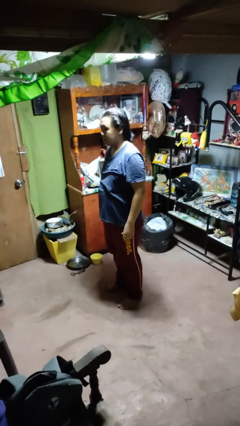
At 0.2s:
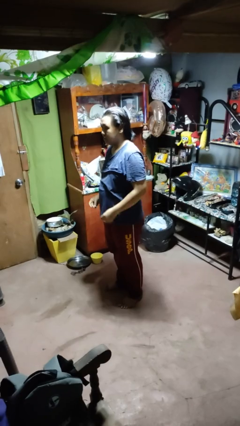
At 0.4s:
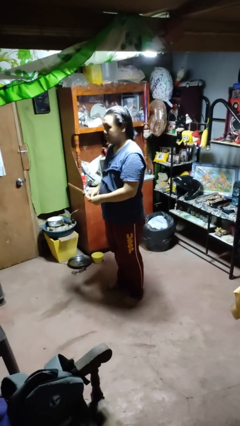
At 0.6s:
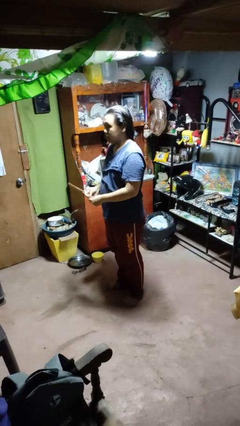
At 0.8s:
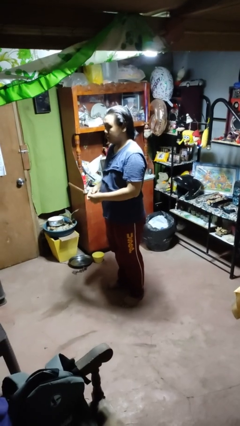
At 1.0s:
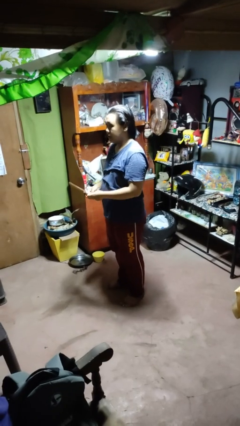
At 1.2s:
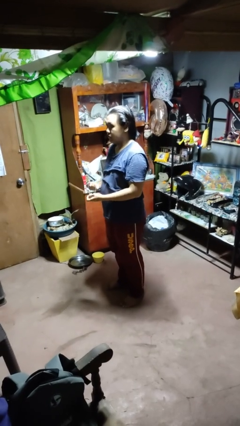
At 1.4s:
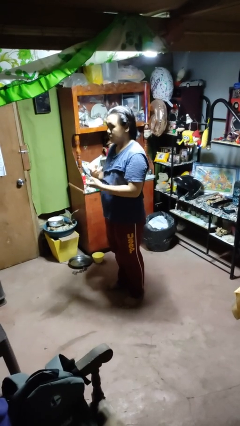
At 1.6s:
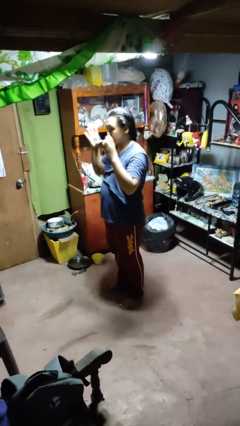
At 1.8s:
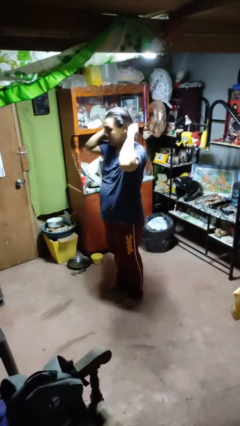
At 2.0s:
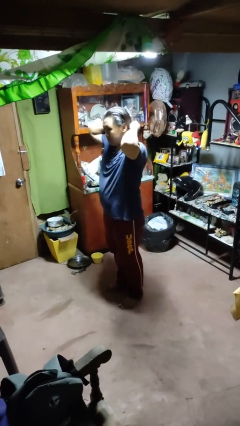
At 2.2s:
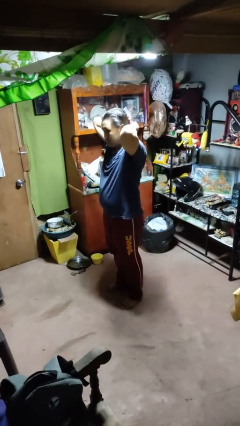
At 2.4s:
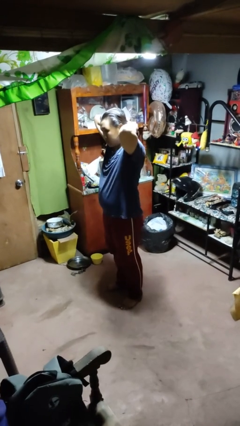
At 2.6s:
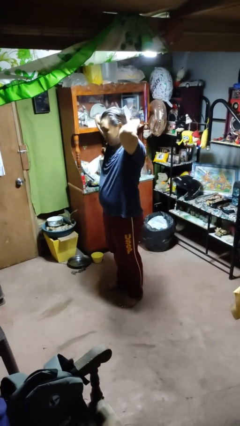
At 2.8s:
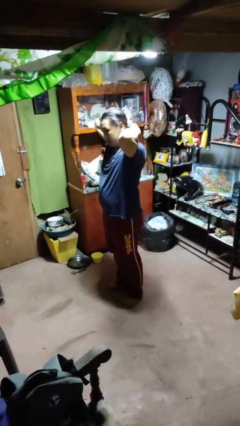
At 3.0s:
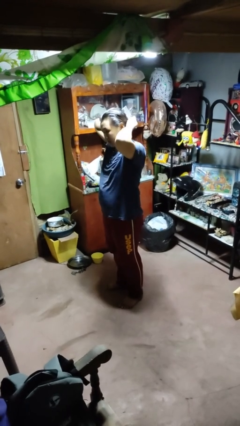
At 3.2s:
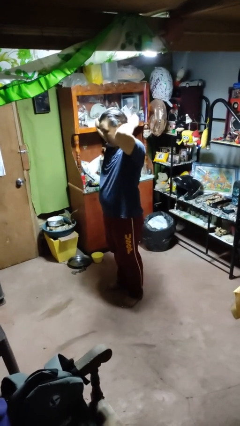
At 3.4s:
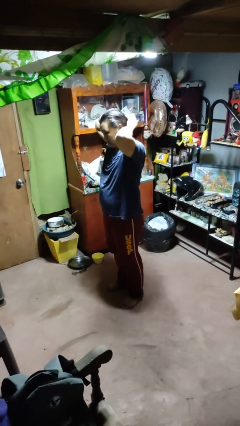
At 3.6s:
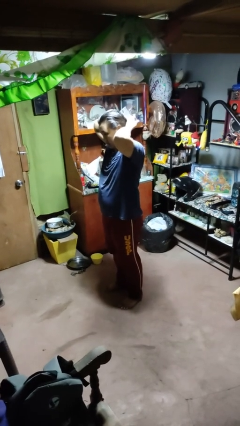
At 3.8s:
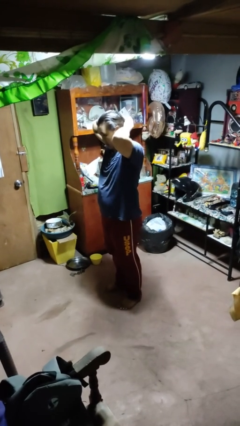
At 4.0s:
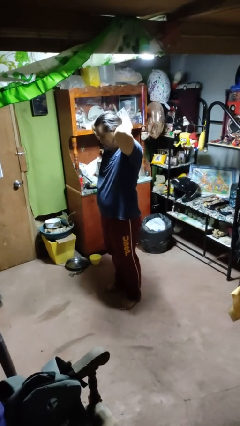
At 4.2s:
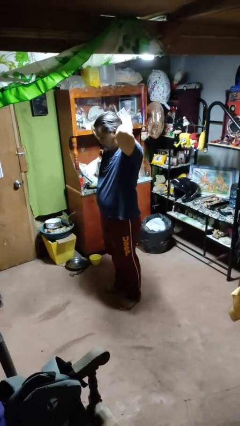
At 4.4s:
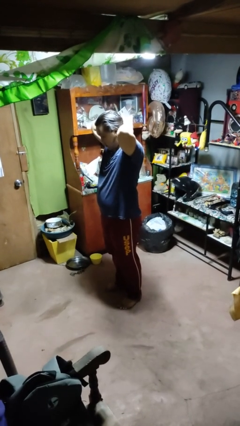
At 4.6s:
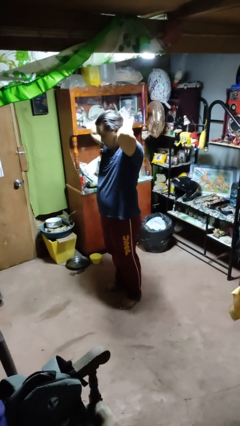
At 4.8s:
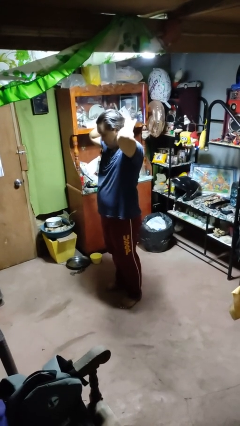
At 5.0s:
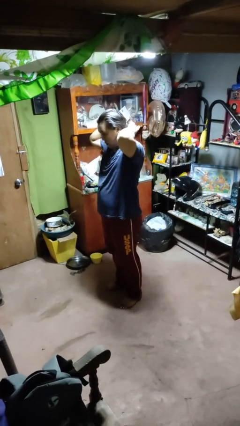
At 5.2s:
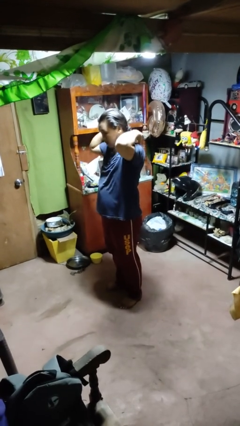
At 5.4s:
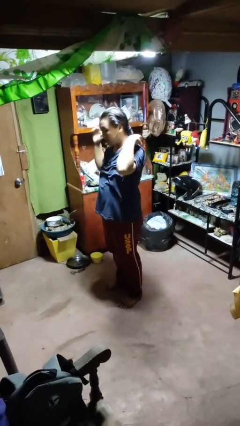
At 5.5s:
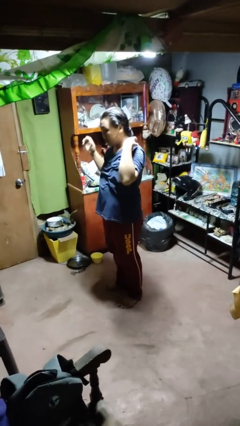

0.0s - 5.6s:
person puts hair in ponytail

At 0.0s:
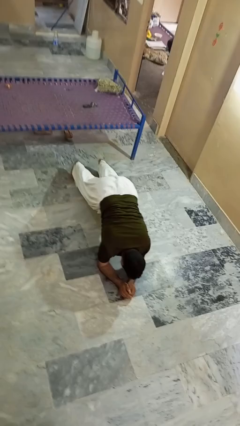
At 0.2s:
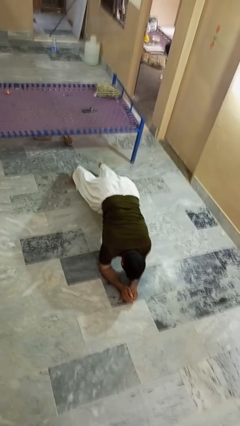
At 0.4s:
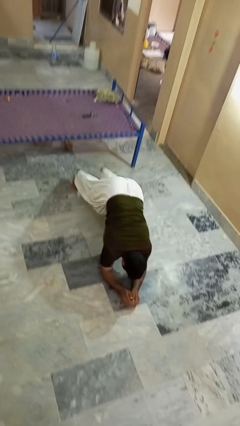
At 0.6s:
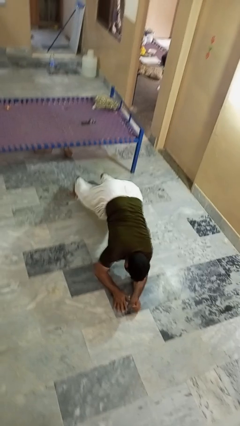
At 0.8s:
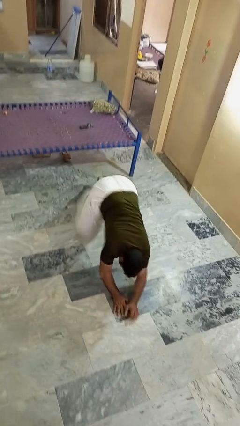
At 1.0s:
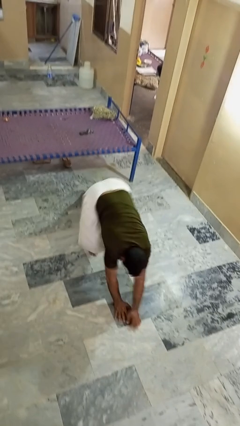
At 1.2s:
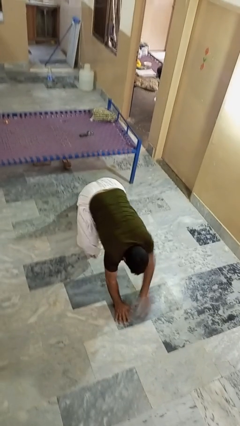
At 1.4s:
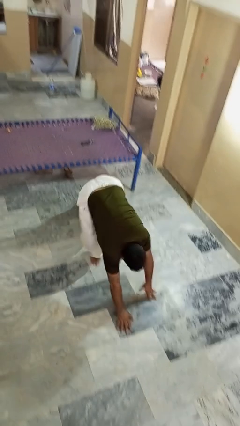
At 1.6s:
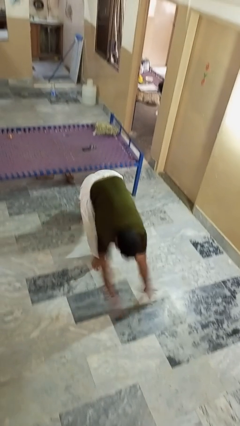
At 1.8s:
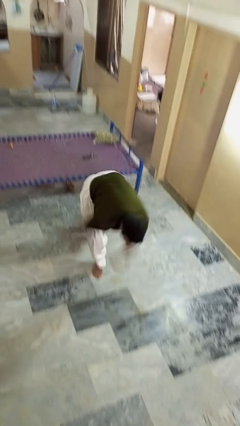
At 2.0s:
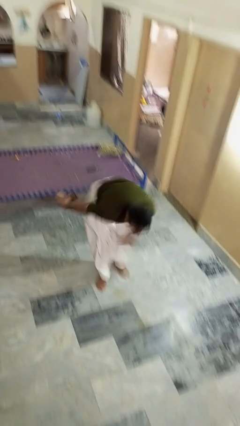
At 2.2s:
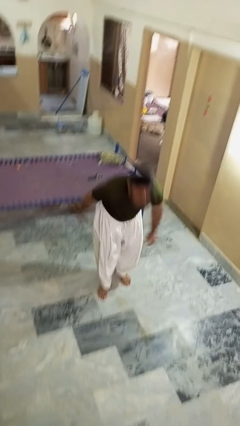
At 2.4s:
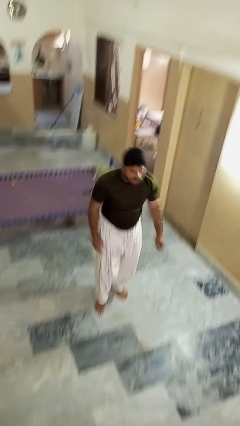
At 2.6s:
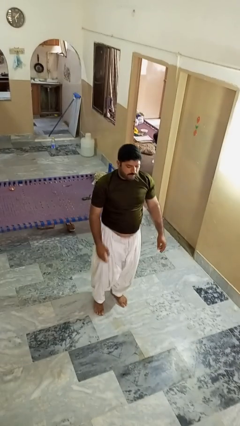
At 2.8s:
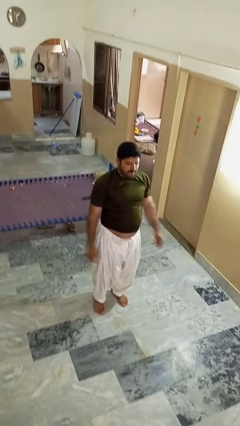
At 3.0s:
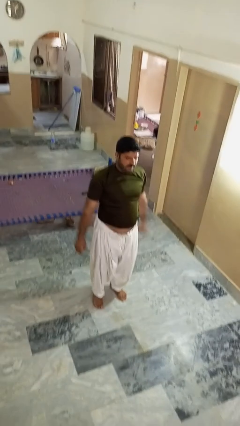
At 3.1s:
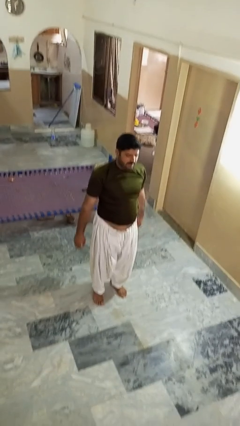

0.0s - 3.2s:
person stands up from floor

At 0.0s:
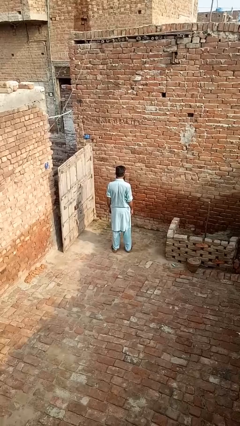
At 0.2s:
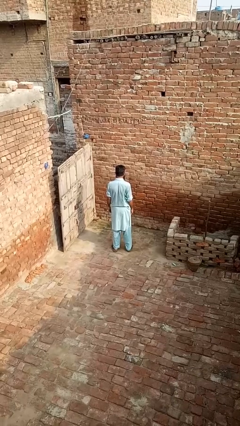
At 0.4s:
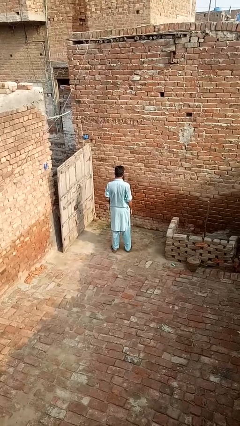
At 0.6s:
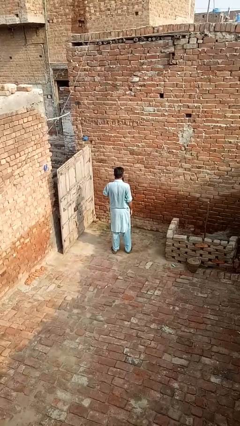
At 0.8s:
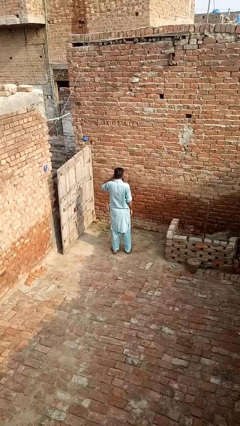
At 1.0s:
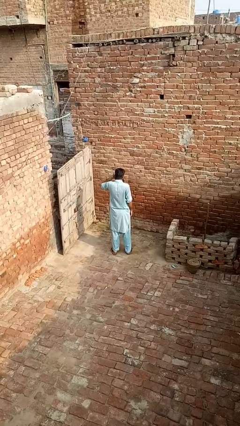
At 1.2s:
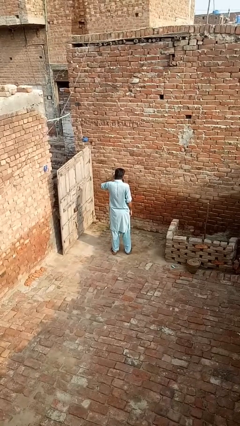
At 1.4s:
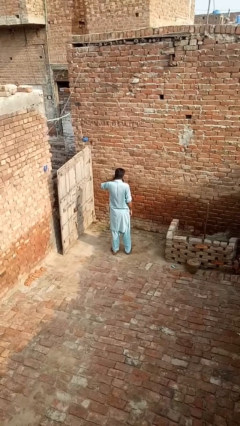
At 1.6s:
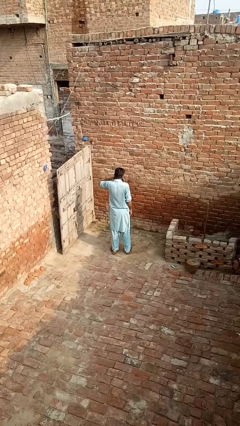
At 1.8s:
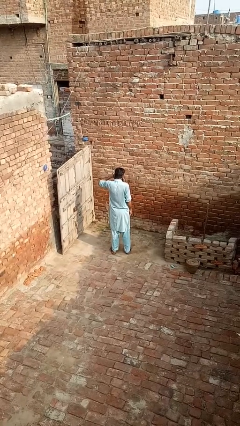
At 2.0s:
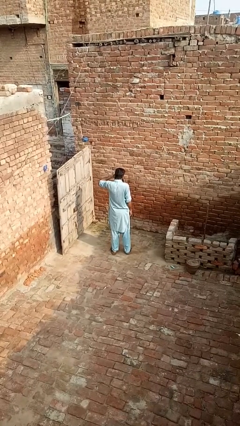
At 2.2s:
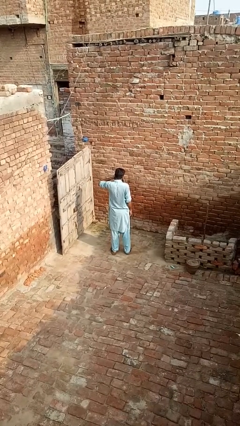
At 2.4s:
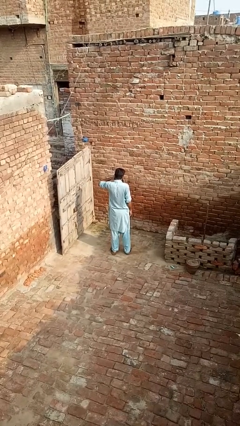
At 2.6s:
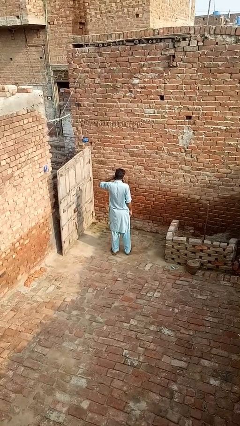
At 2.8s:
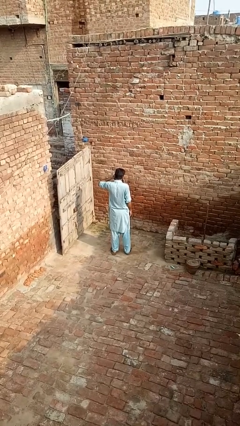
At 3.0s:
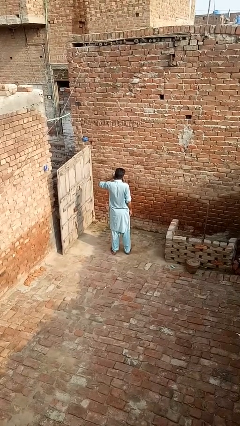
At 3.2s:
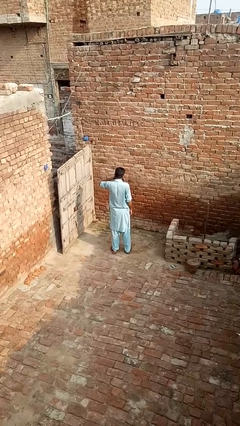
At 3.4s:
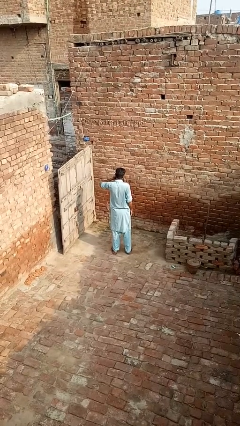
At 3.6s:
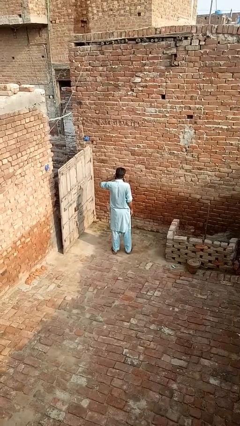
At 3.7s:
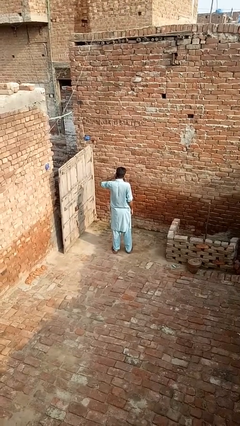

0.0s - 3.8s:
person rubs eyes

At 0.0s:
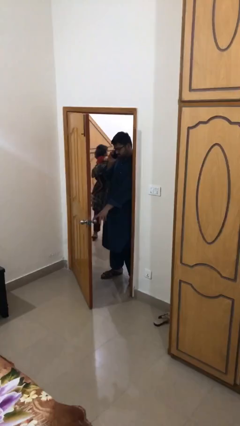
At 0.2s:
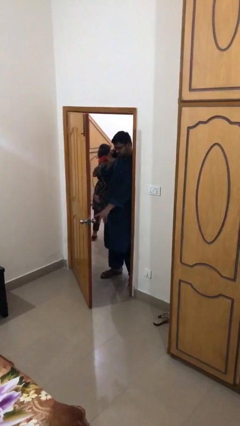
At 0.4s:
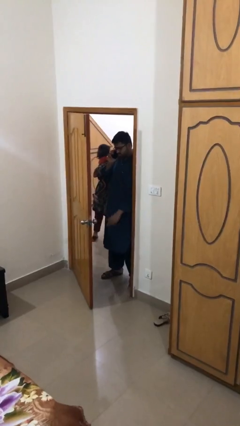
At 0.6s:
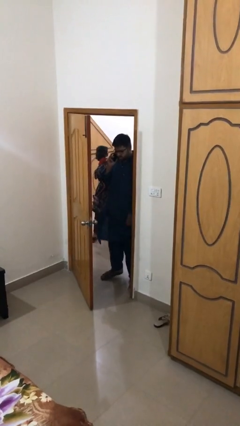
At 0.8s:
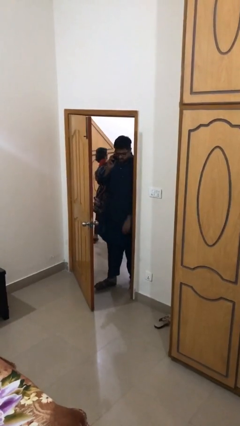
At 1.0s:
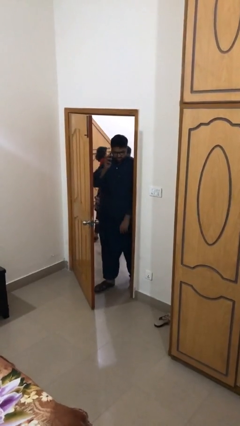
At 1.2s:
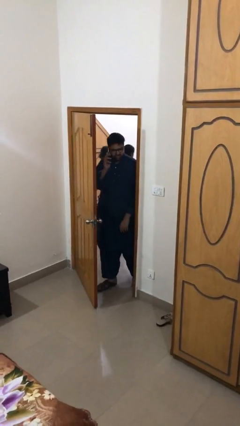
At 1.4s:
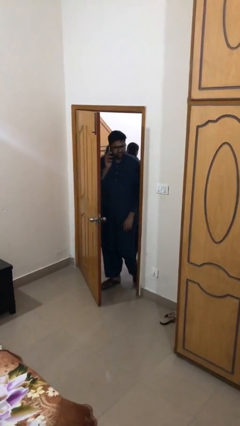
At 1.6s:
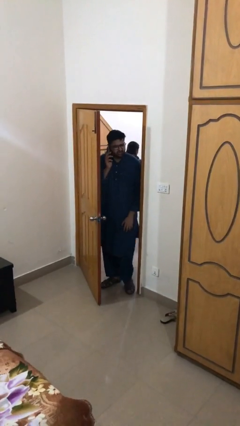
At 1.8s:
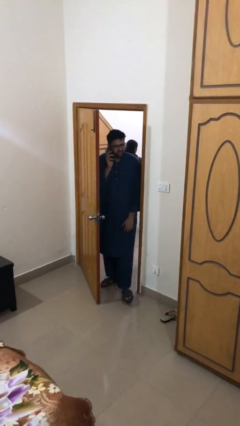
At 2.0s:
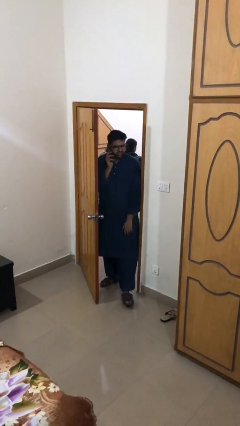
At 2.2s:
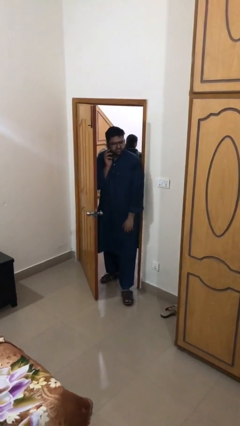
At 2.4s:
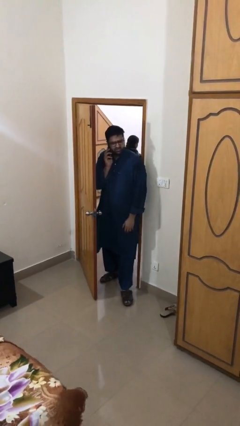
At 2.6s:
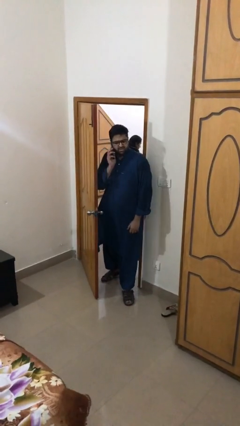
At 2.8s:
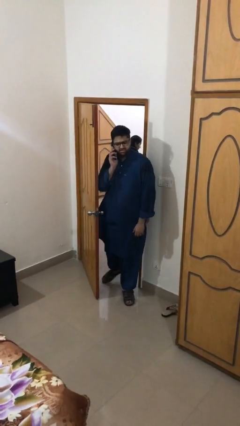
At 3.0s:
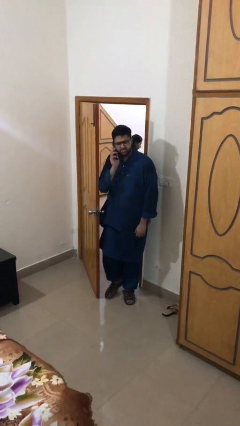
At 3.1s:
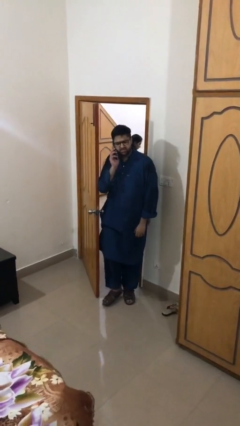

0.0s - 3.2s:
person enters scene through structure

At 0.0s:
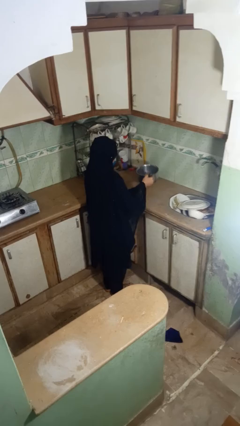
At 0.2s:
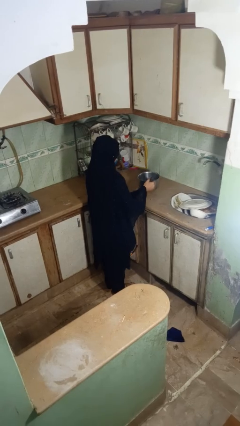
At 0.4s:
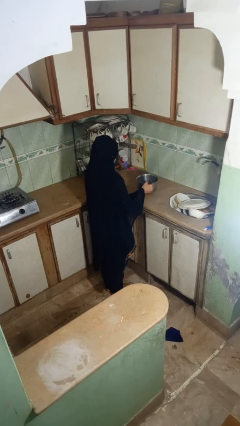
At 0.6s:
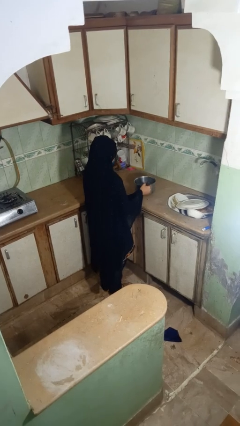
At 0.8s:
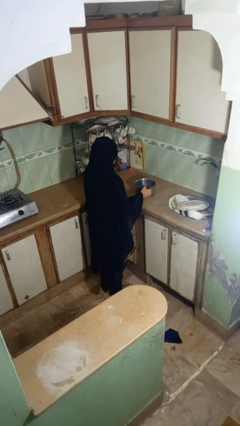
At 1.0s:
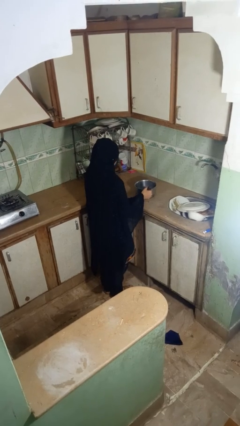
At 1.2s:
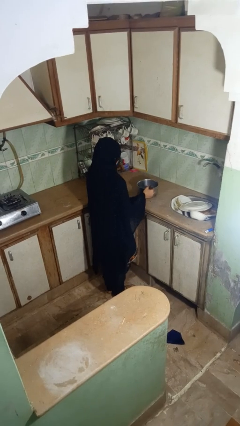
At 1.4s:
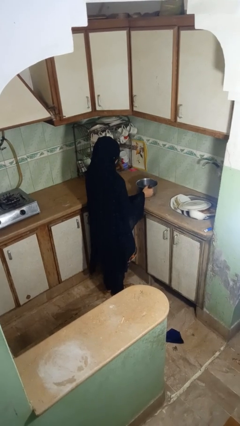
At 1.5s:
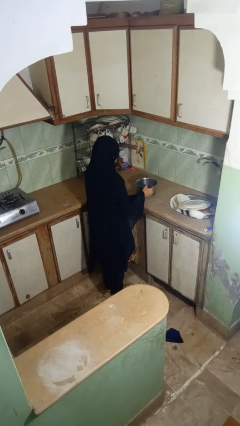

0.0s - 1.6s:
person puts down object on countertop
